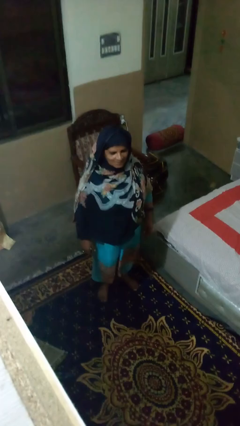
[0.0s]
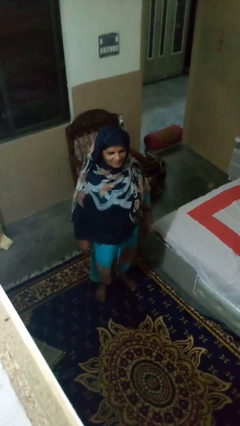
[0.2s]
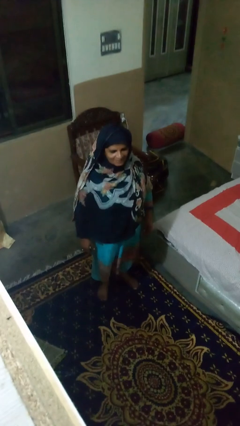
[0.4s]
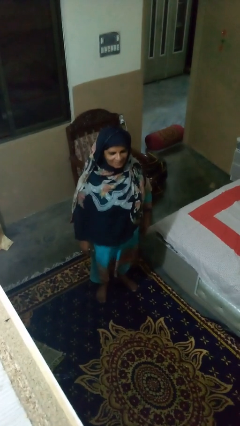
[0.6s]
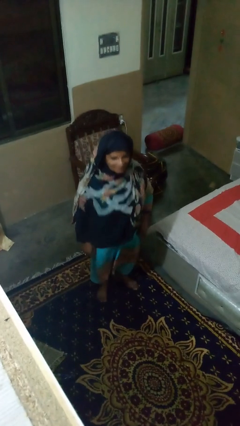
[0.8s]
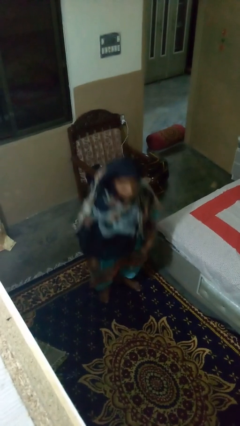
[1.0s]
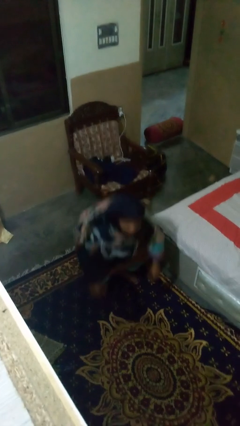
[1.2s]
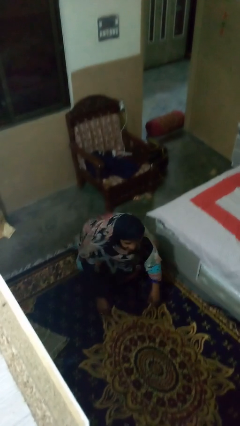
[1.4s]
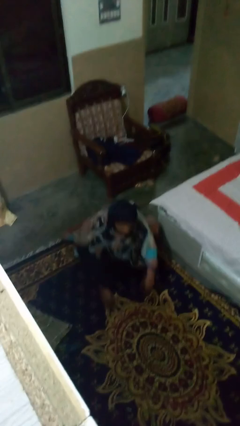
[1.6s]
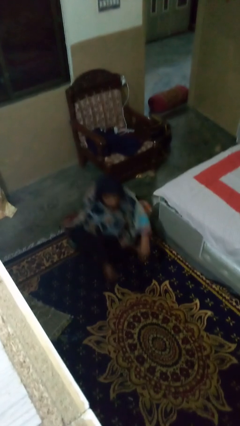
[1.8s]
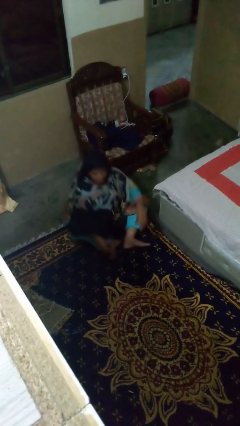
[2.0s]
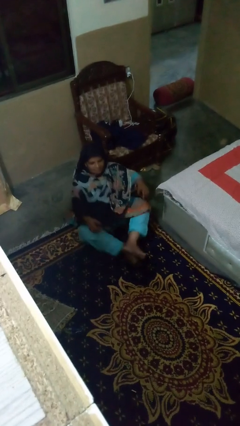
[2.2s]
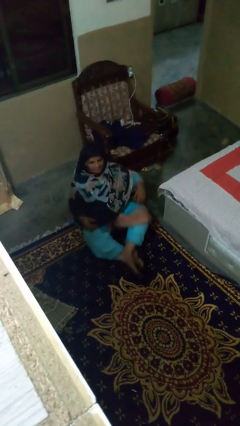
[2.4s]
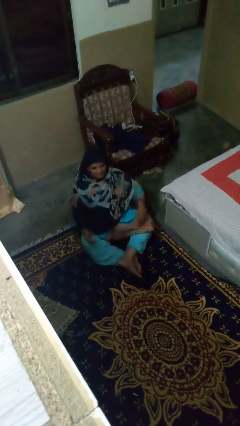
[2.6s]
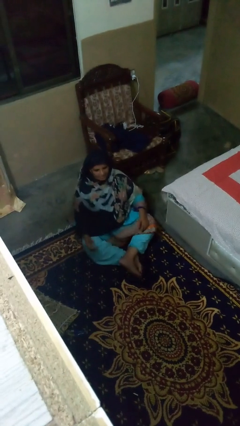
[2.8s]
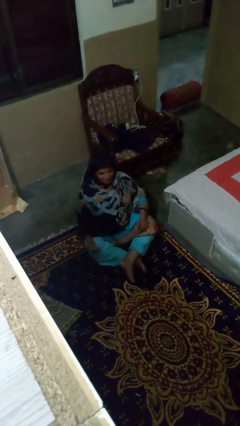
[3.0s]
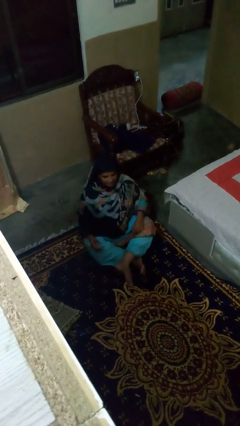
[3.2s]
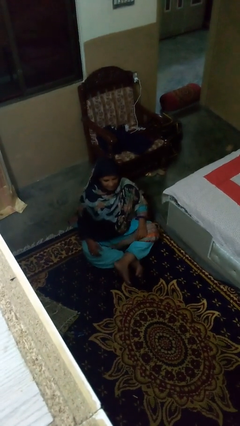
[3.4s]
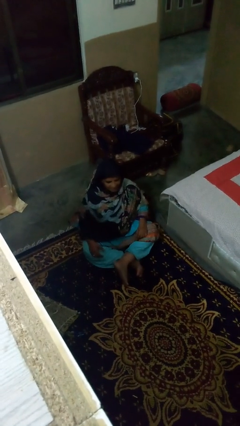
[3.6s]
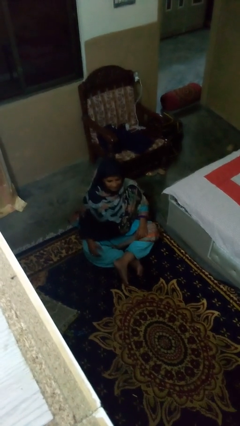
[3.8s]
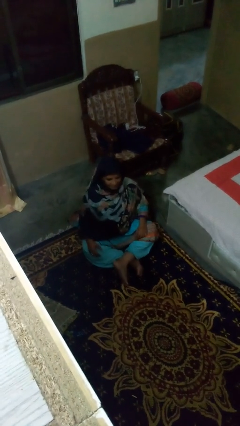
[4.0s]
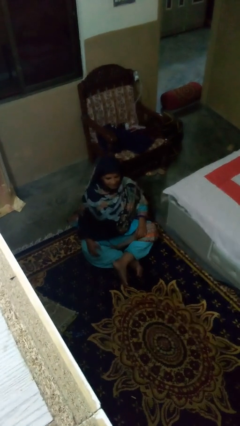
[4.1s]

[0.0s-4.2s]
person sits crisscross

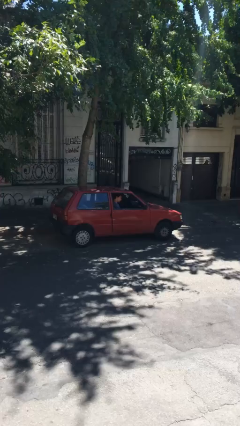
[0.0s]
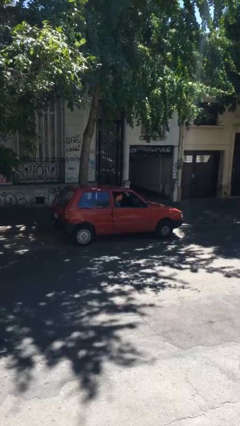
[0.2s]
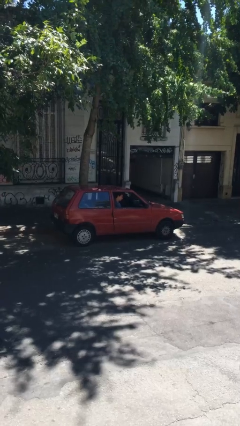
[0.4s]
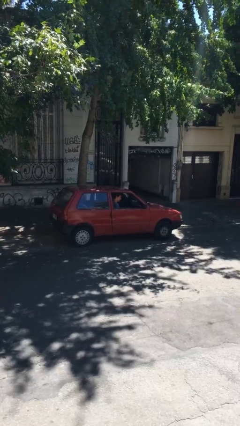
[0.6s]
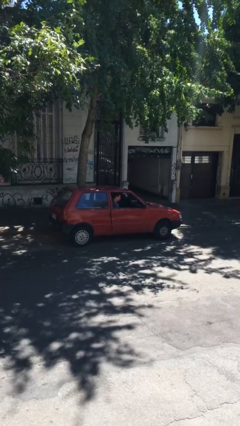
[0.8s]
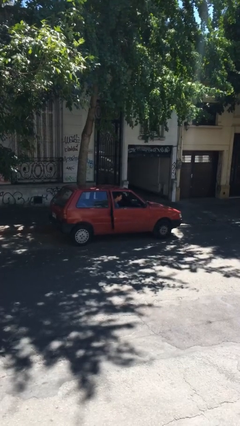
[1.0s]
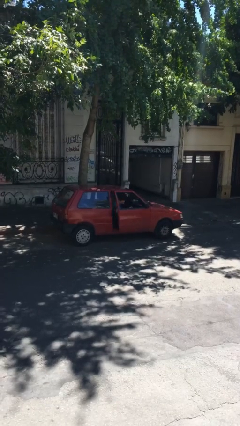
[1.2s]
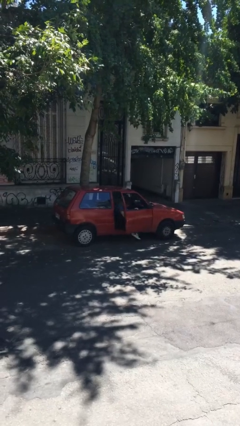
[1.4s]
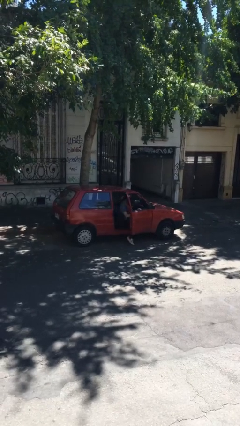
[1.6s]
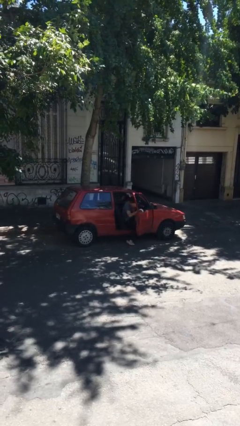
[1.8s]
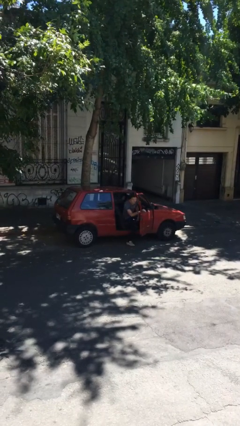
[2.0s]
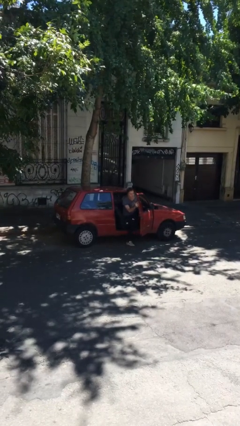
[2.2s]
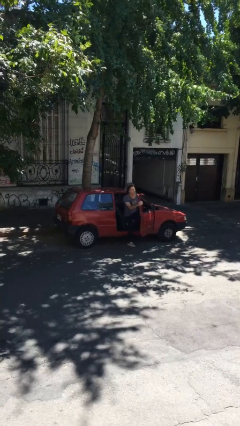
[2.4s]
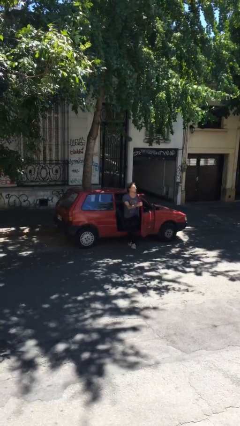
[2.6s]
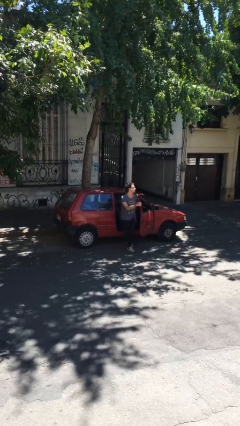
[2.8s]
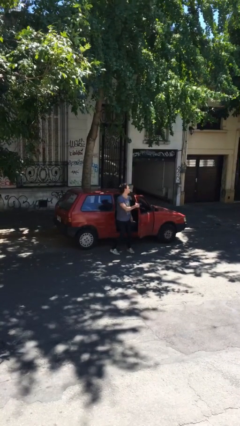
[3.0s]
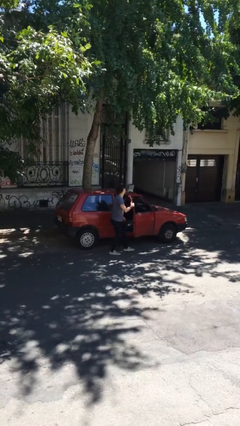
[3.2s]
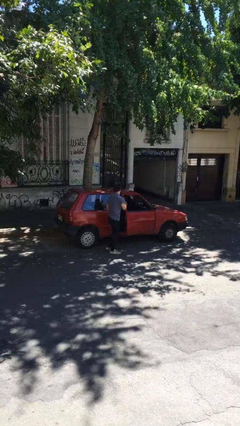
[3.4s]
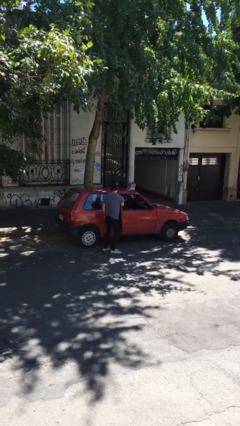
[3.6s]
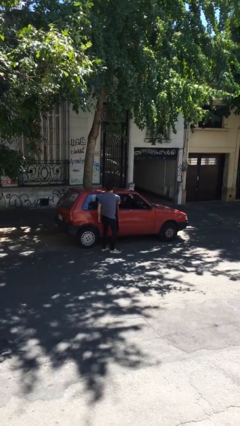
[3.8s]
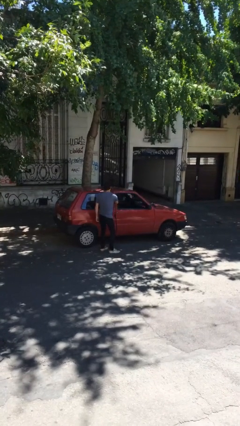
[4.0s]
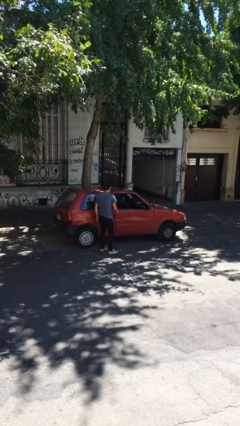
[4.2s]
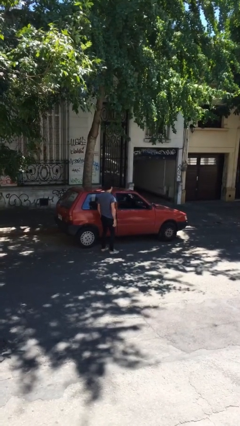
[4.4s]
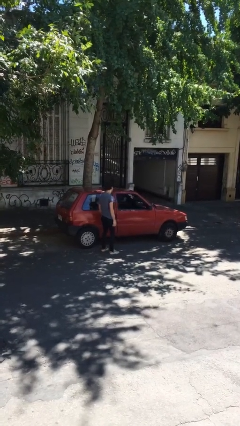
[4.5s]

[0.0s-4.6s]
car drops off person

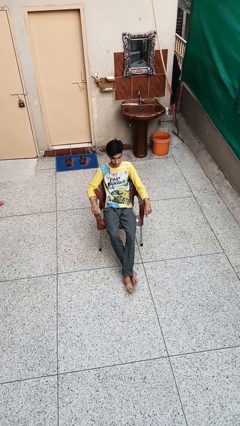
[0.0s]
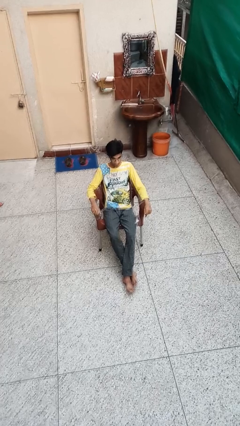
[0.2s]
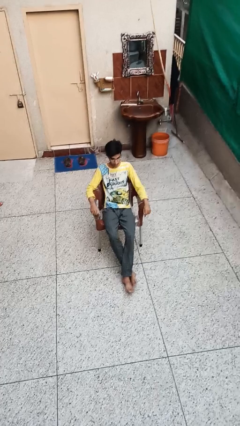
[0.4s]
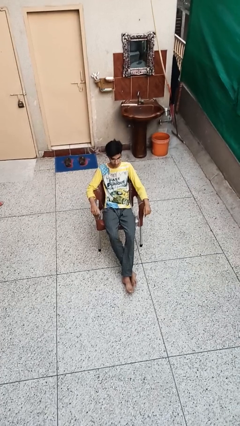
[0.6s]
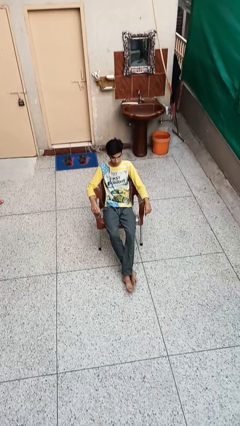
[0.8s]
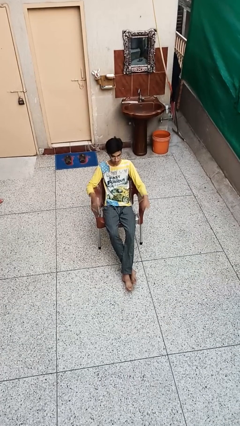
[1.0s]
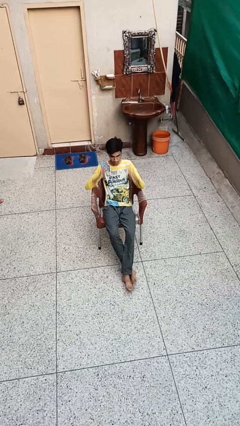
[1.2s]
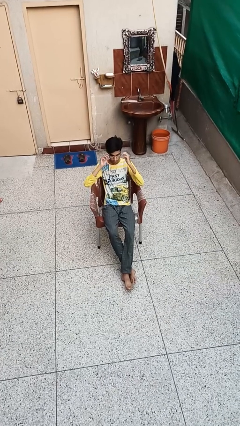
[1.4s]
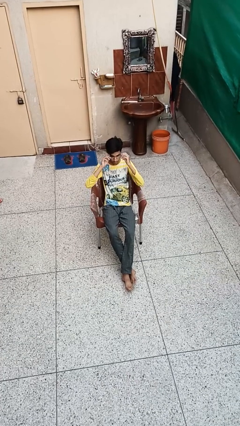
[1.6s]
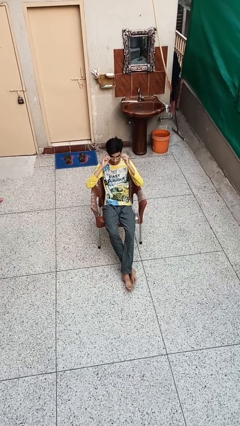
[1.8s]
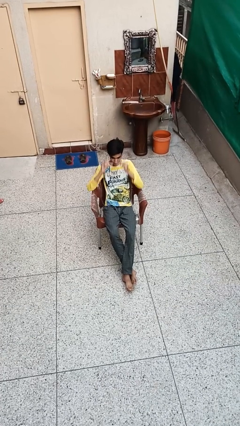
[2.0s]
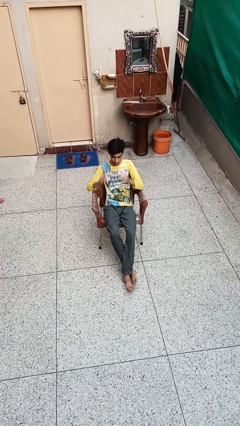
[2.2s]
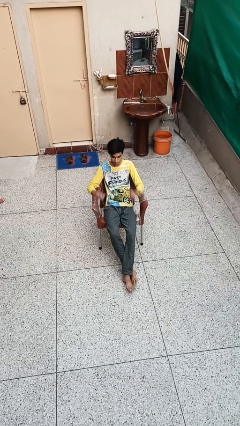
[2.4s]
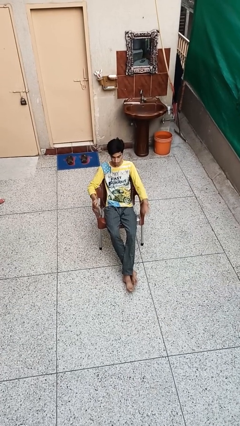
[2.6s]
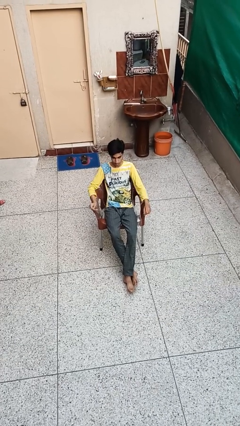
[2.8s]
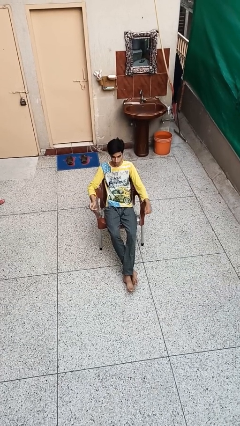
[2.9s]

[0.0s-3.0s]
person takes off glasses

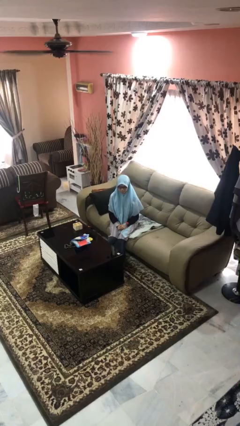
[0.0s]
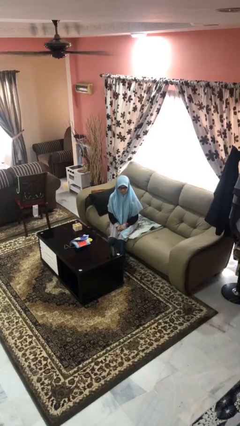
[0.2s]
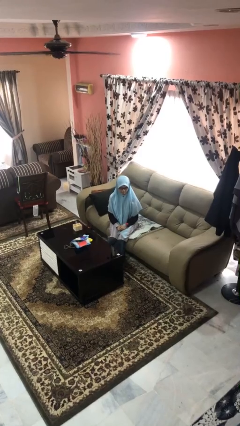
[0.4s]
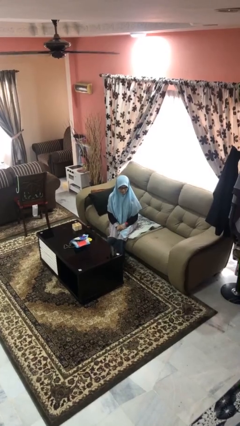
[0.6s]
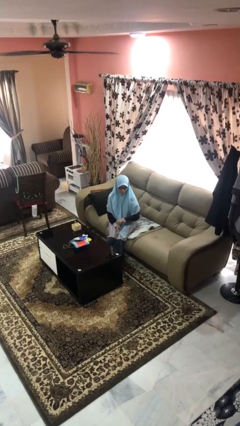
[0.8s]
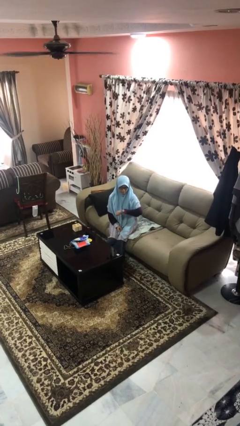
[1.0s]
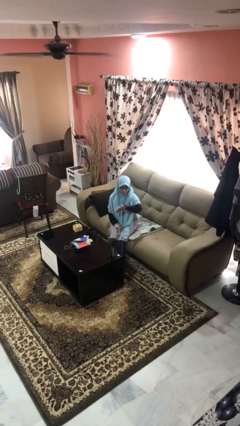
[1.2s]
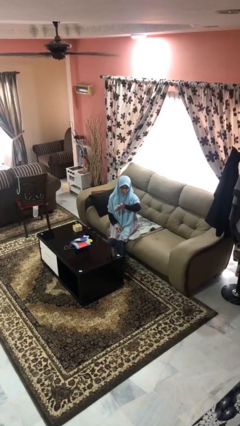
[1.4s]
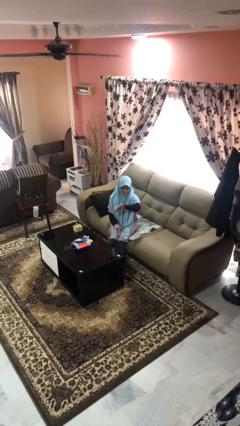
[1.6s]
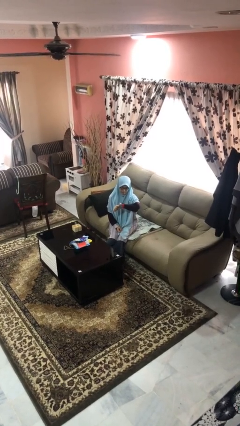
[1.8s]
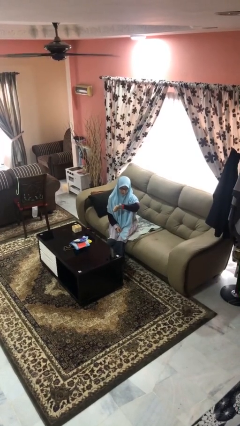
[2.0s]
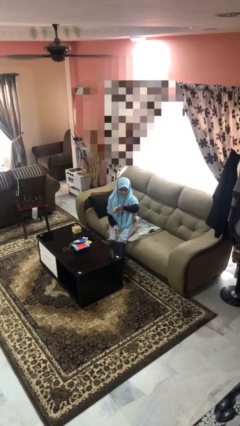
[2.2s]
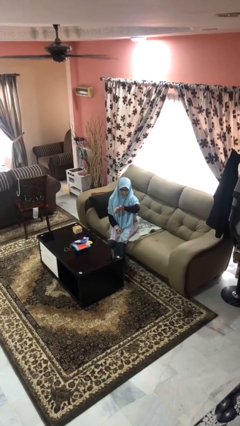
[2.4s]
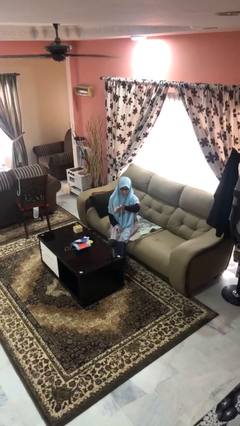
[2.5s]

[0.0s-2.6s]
person looks at wristwatch

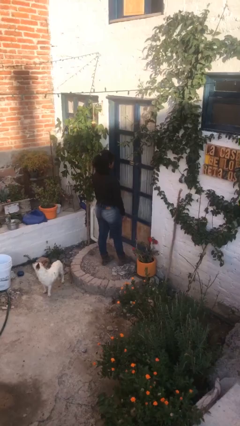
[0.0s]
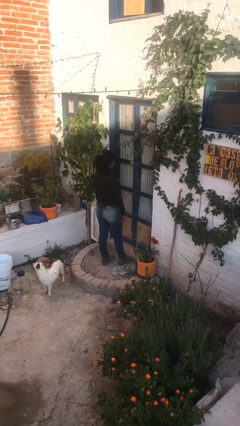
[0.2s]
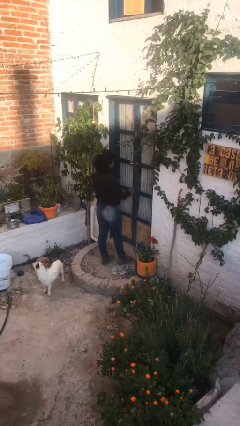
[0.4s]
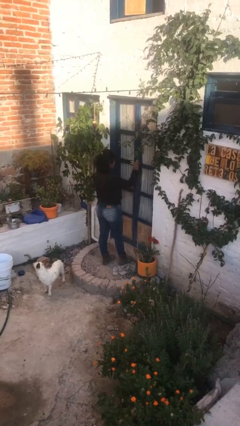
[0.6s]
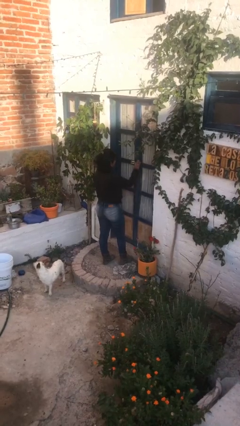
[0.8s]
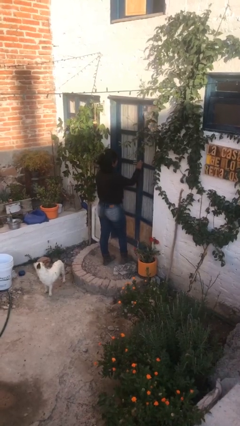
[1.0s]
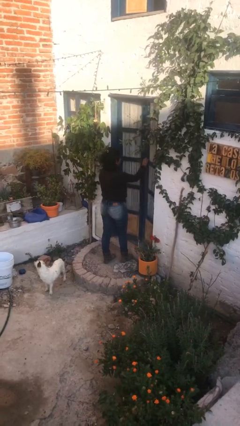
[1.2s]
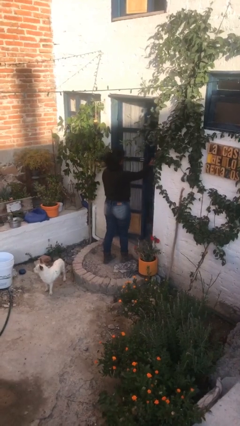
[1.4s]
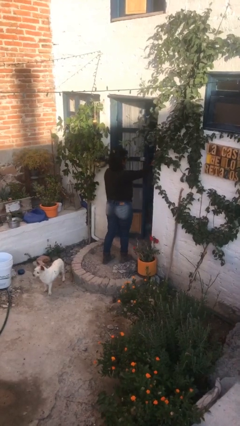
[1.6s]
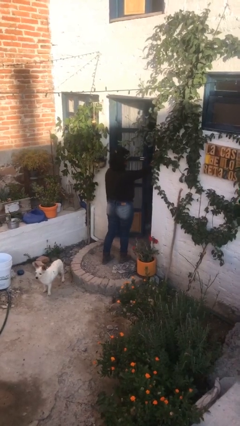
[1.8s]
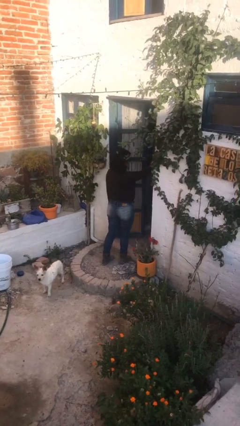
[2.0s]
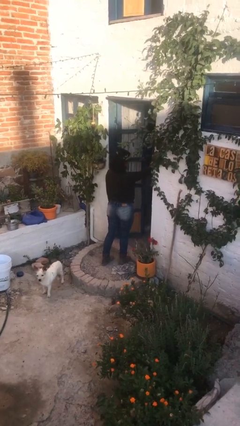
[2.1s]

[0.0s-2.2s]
person opens facility door

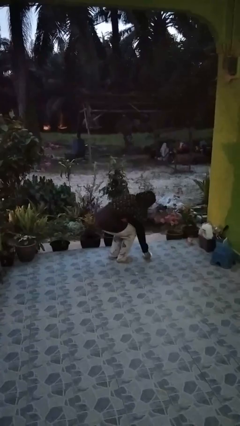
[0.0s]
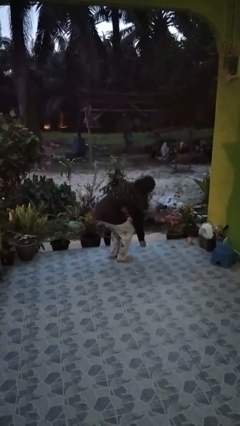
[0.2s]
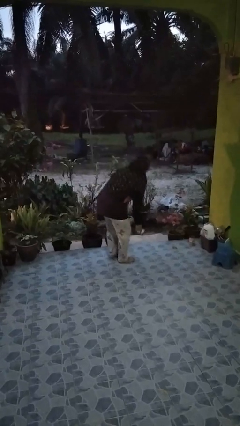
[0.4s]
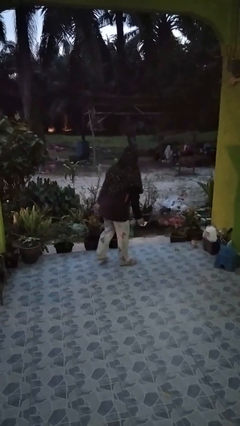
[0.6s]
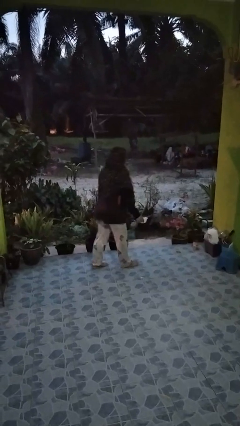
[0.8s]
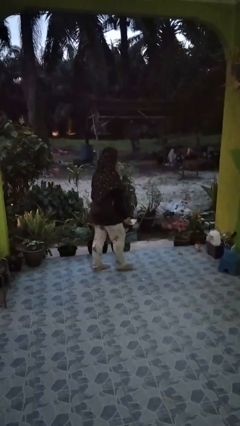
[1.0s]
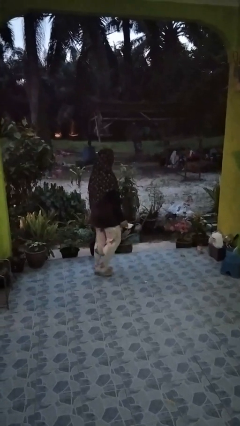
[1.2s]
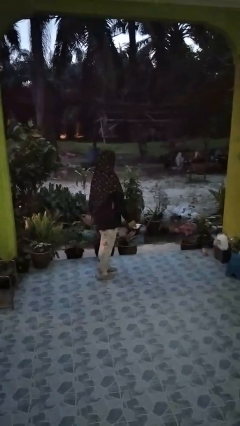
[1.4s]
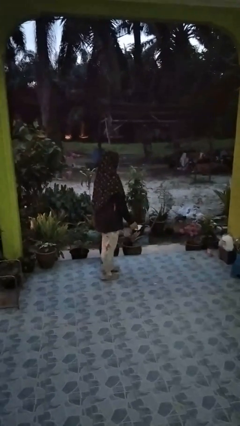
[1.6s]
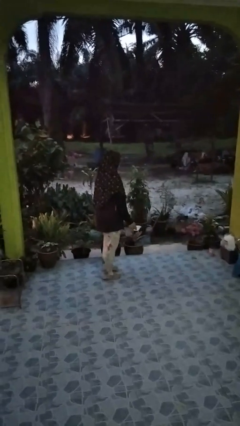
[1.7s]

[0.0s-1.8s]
person picks up object from floor
